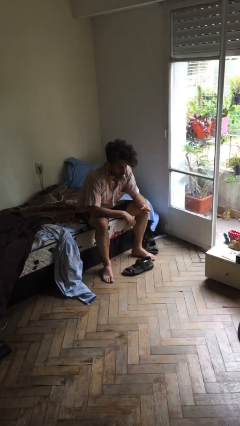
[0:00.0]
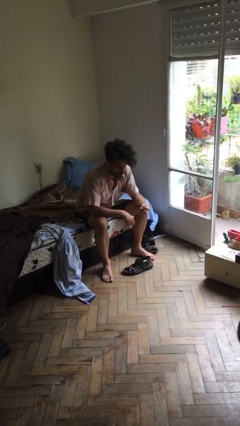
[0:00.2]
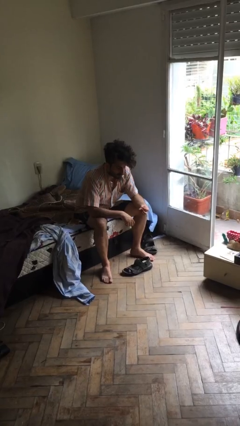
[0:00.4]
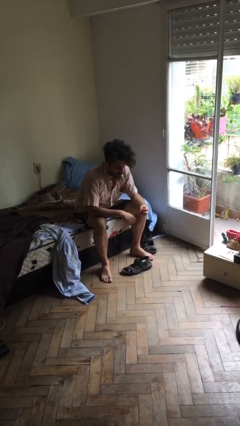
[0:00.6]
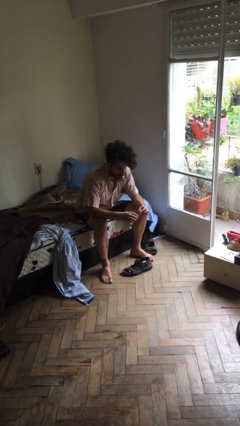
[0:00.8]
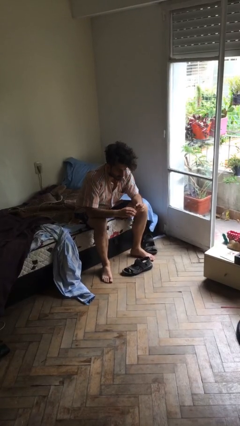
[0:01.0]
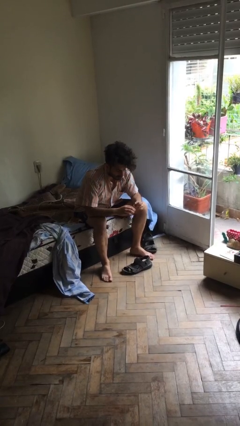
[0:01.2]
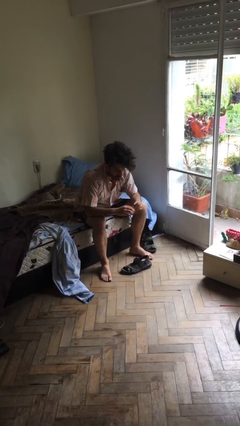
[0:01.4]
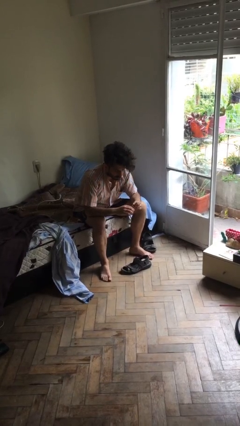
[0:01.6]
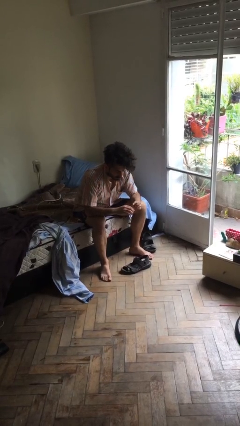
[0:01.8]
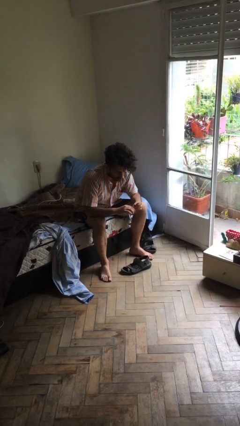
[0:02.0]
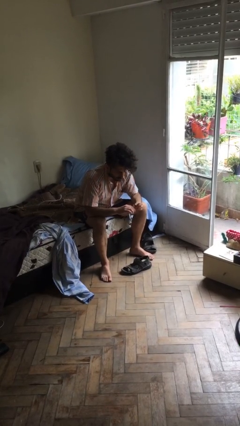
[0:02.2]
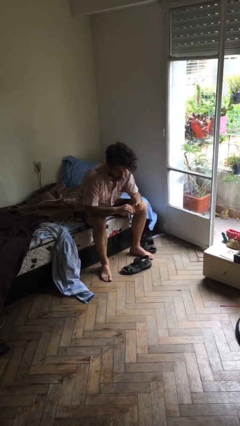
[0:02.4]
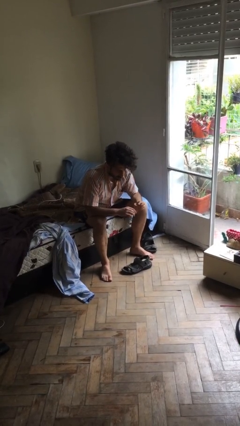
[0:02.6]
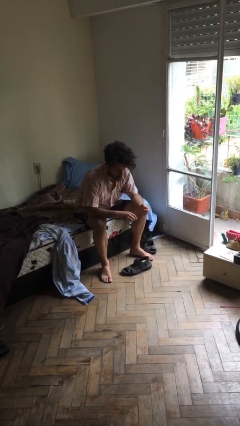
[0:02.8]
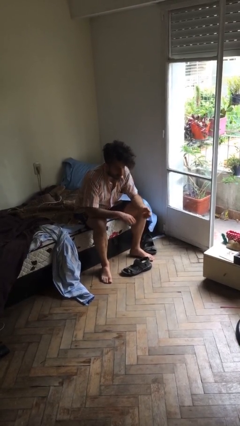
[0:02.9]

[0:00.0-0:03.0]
person clips fingernails

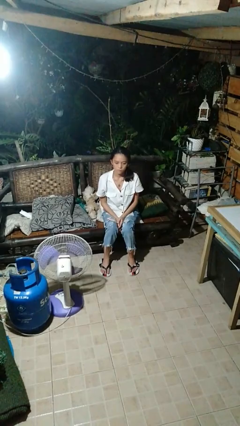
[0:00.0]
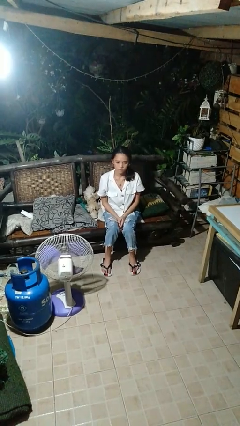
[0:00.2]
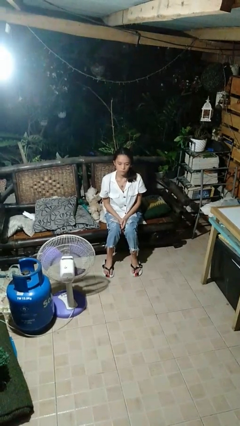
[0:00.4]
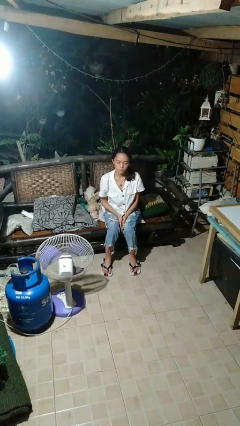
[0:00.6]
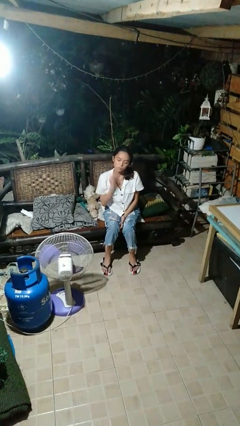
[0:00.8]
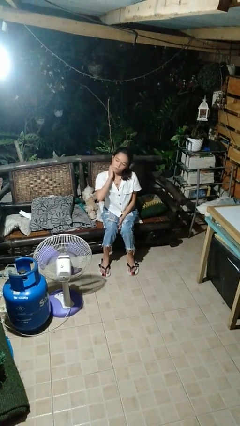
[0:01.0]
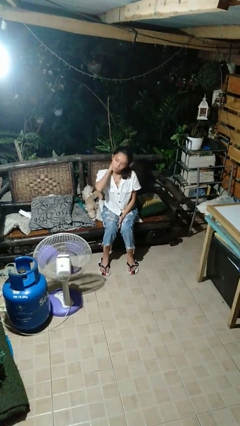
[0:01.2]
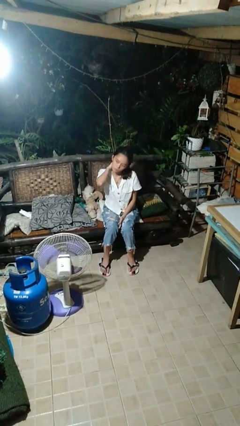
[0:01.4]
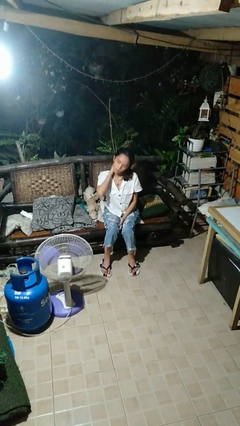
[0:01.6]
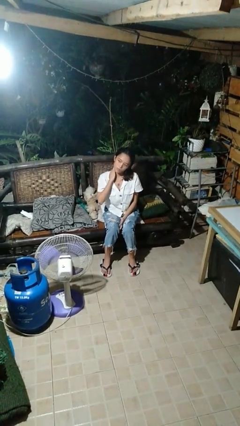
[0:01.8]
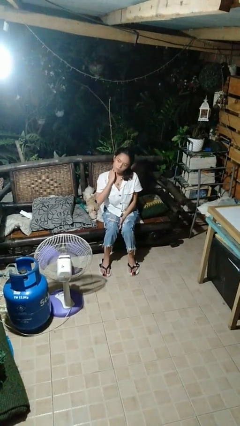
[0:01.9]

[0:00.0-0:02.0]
person rubs neck

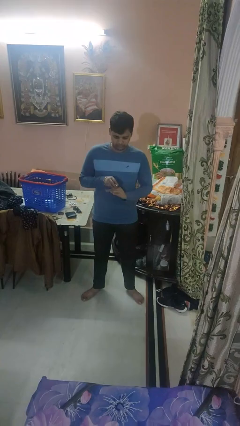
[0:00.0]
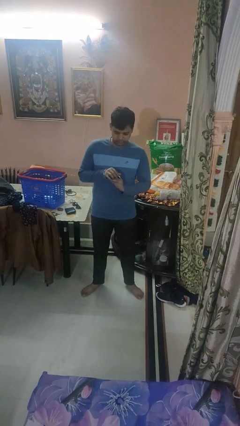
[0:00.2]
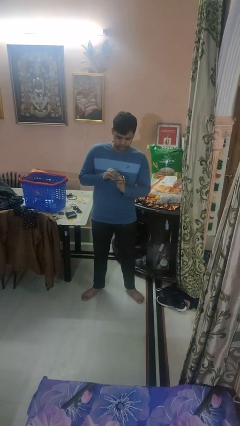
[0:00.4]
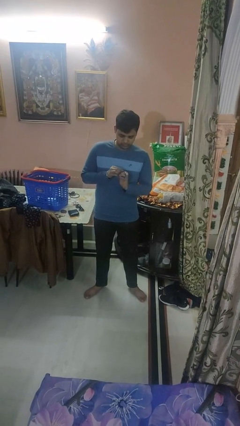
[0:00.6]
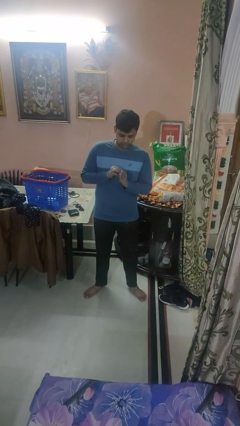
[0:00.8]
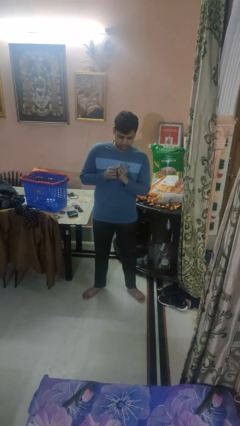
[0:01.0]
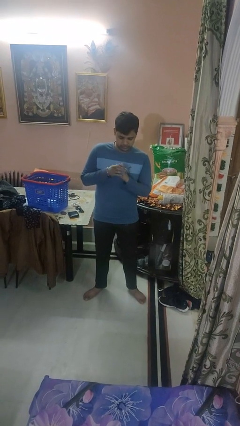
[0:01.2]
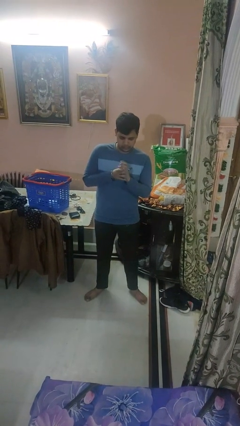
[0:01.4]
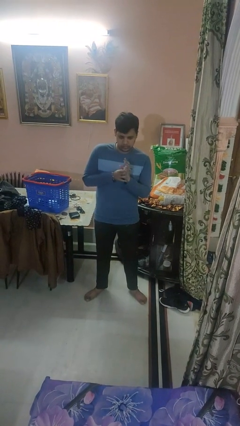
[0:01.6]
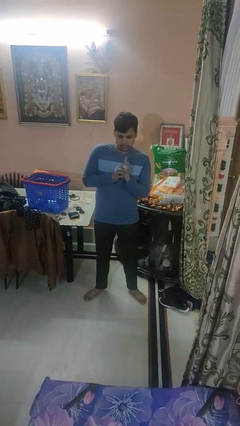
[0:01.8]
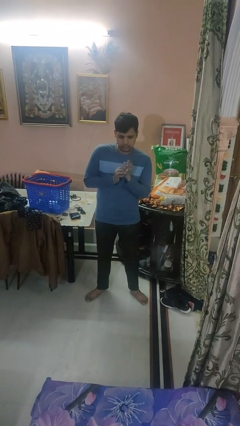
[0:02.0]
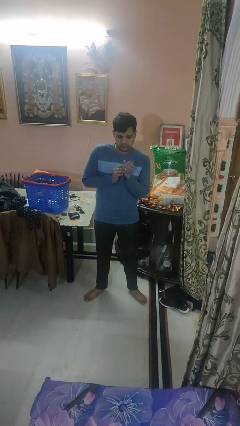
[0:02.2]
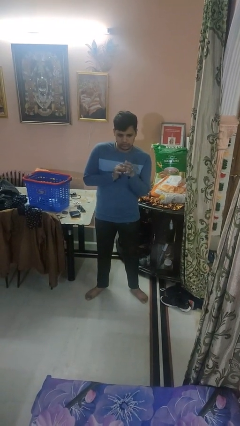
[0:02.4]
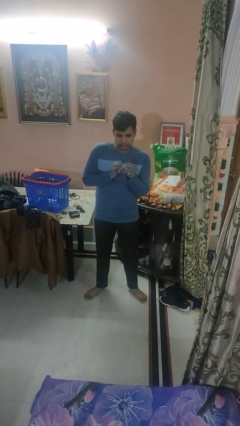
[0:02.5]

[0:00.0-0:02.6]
person puts on wristwatch

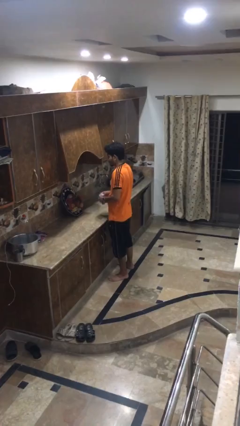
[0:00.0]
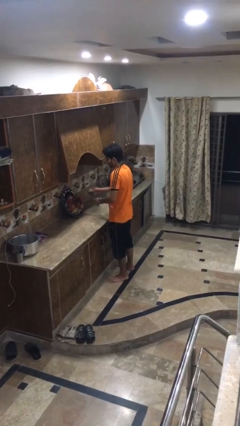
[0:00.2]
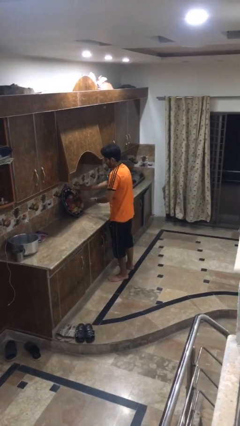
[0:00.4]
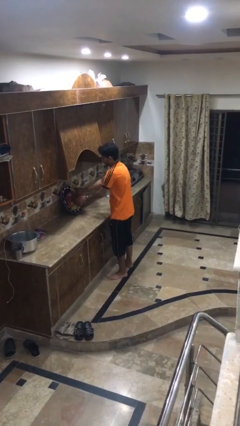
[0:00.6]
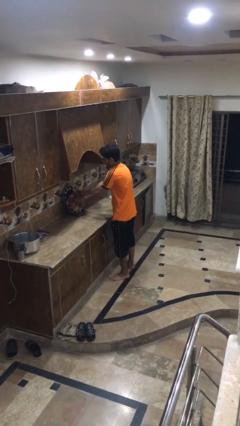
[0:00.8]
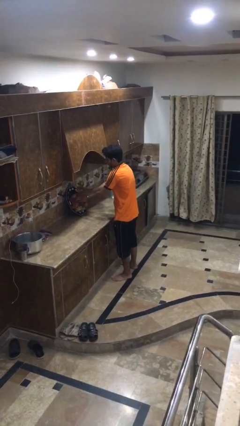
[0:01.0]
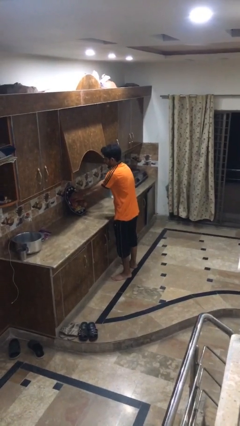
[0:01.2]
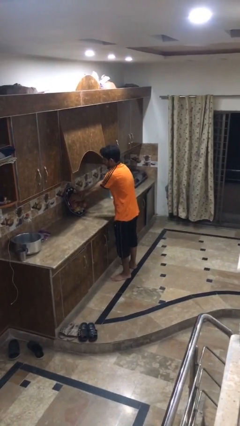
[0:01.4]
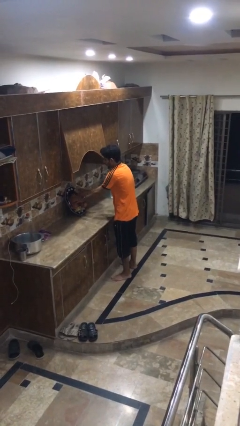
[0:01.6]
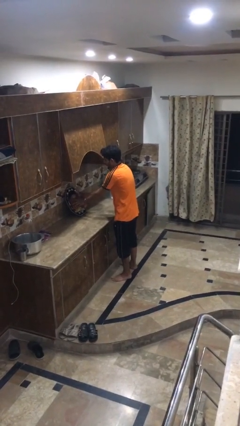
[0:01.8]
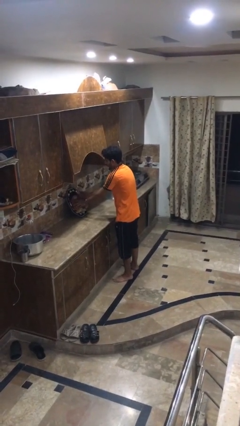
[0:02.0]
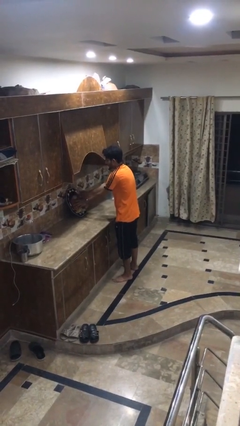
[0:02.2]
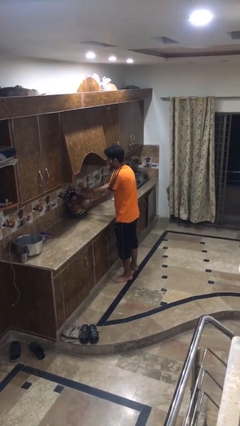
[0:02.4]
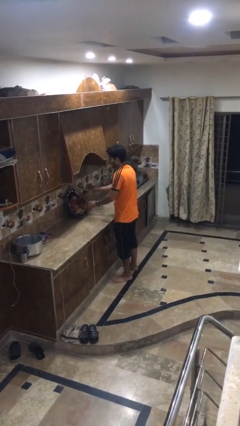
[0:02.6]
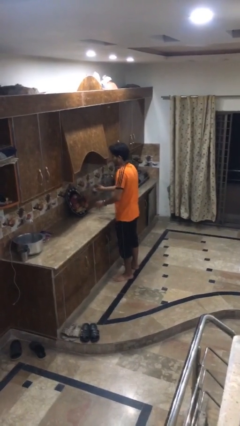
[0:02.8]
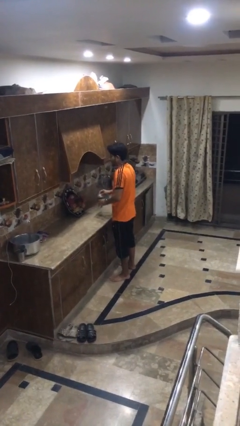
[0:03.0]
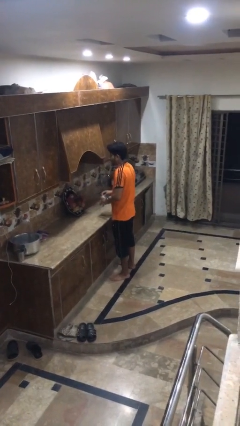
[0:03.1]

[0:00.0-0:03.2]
person arranges flowers in vase

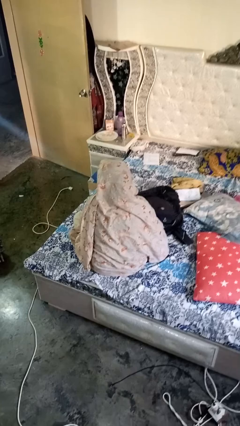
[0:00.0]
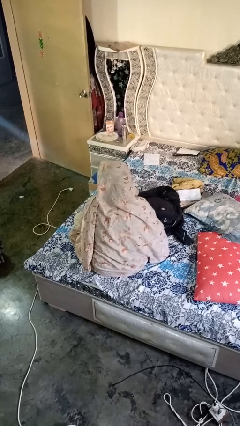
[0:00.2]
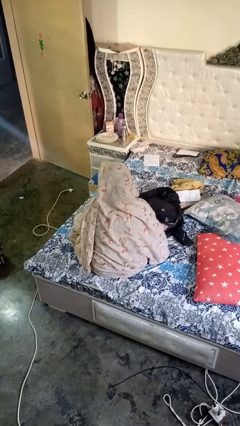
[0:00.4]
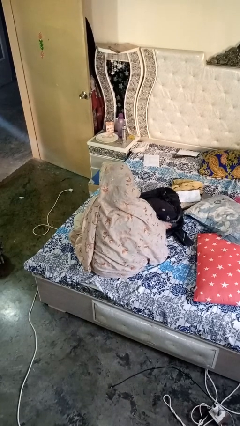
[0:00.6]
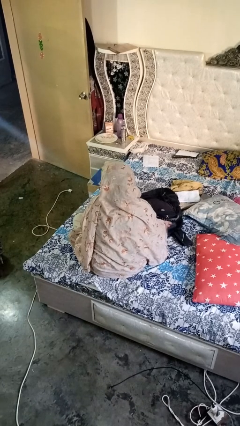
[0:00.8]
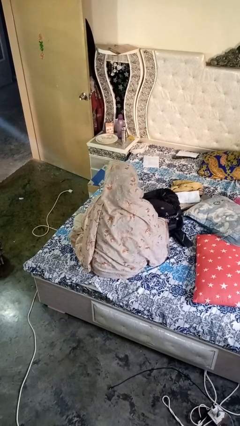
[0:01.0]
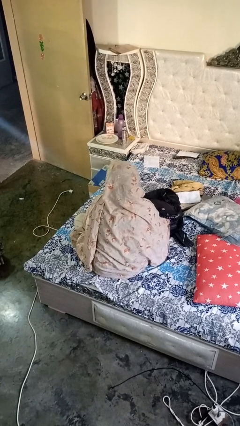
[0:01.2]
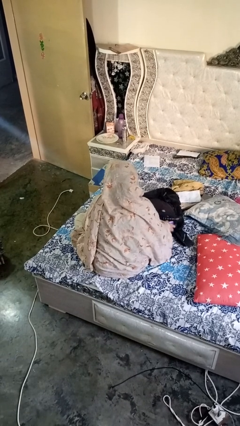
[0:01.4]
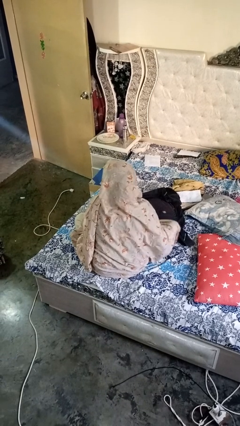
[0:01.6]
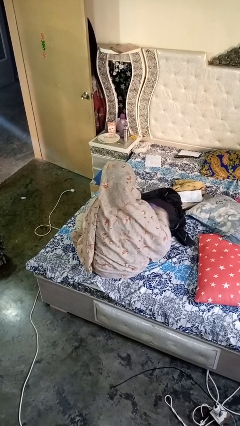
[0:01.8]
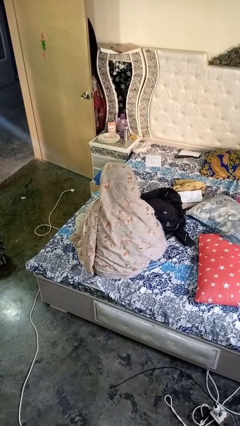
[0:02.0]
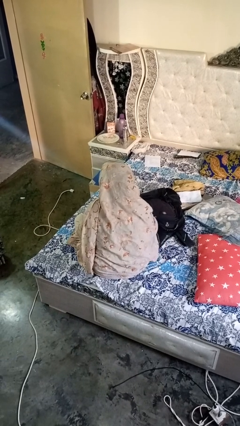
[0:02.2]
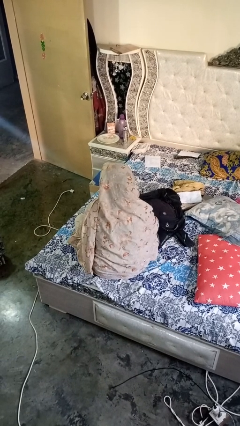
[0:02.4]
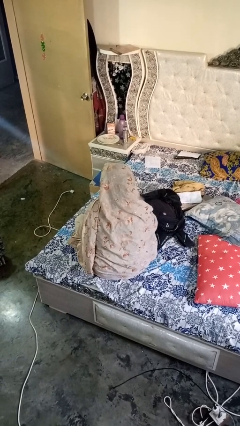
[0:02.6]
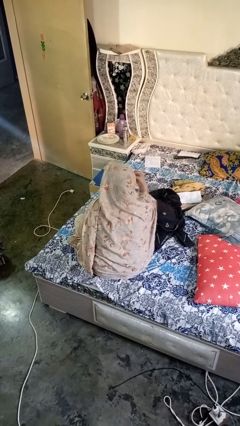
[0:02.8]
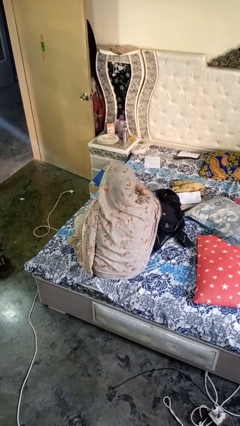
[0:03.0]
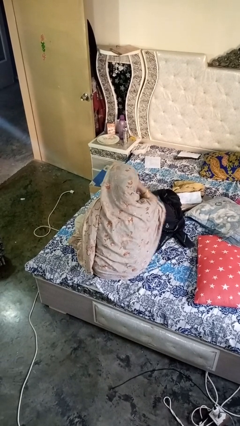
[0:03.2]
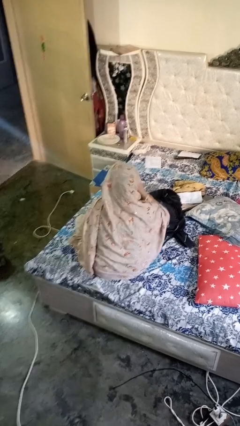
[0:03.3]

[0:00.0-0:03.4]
person eats snack from bag

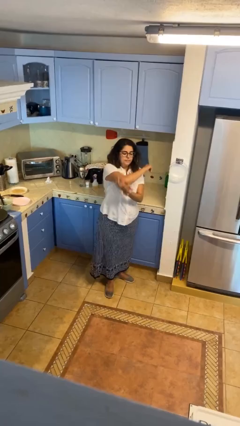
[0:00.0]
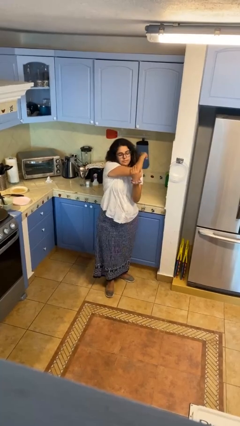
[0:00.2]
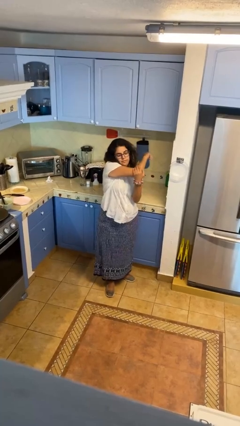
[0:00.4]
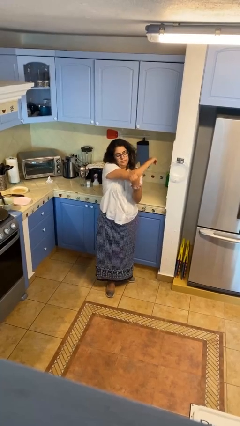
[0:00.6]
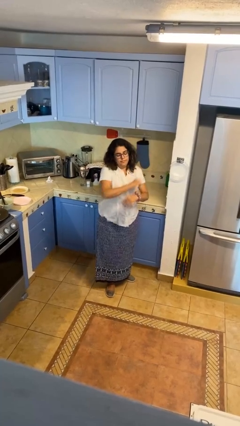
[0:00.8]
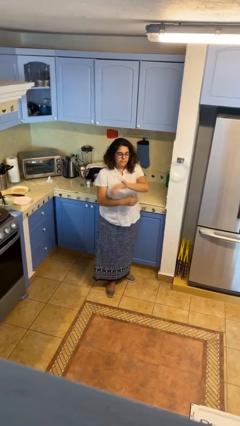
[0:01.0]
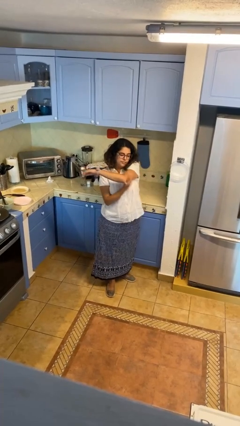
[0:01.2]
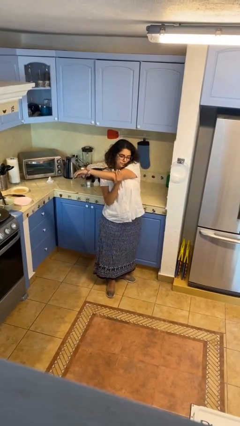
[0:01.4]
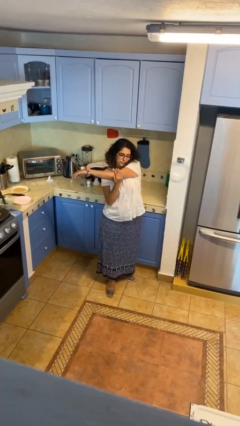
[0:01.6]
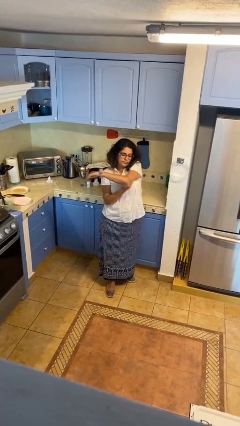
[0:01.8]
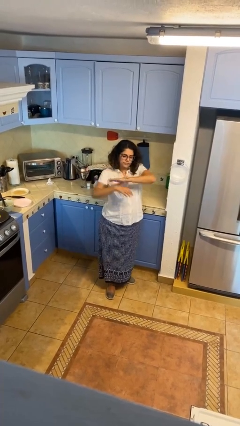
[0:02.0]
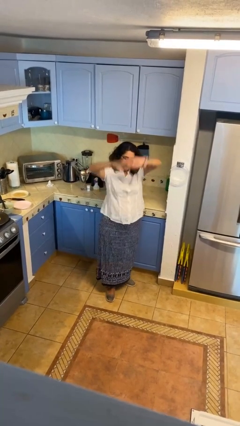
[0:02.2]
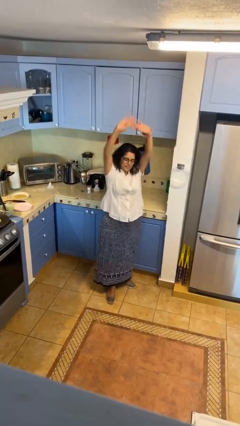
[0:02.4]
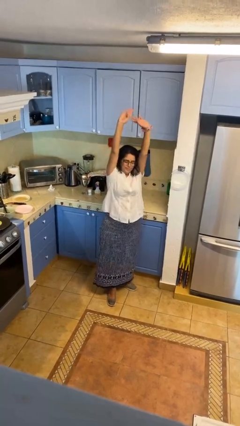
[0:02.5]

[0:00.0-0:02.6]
person stretches arms to side

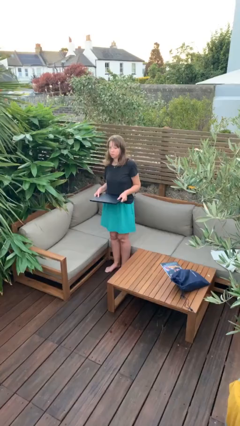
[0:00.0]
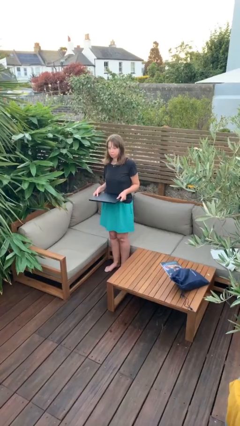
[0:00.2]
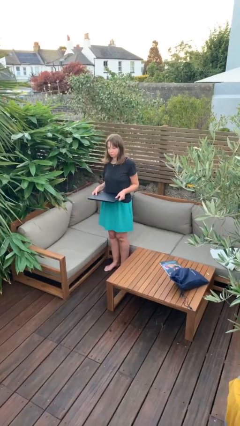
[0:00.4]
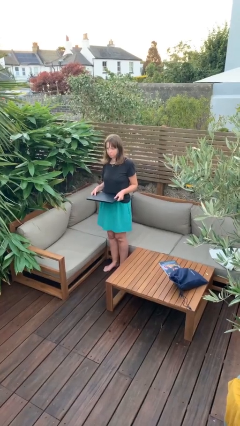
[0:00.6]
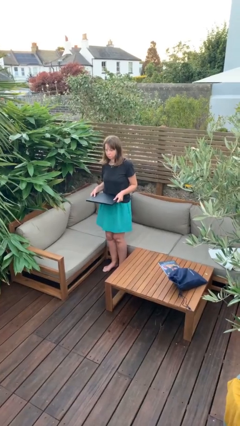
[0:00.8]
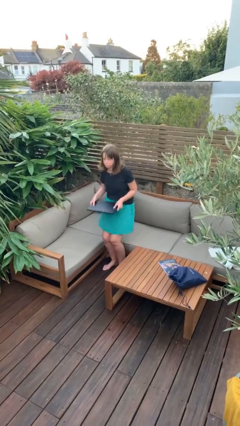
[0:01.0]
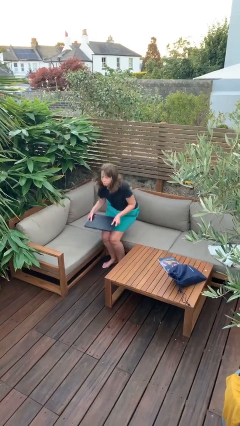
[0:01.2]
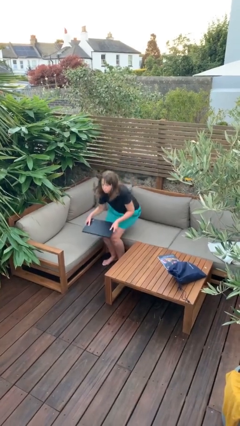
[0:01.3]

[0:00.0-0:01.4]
person sits down
